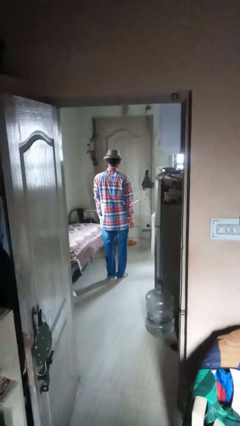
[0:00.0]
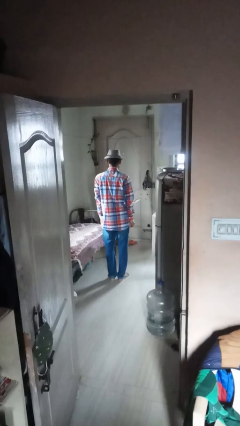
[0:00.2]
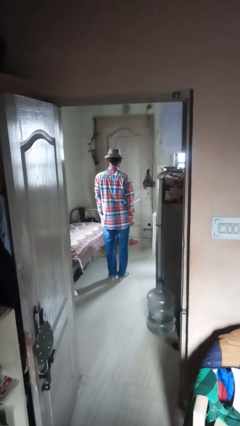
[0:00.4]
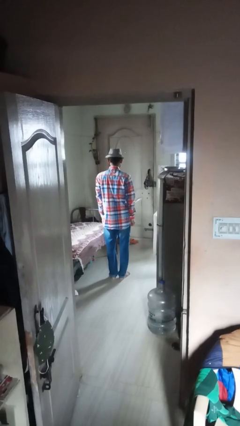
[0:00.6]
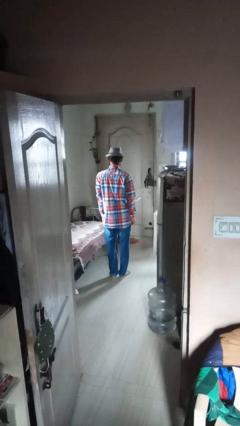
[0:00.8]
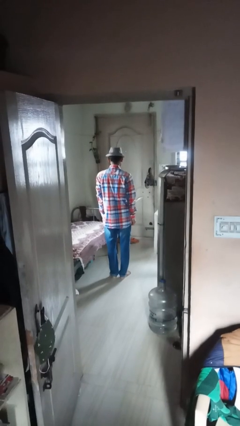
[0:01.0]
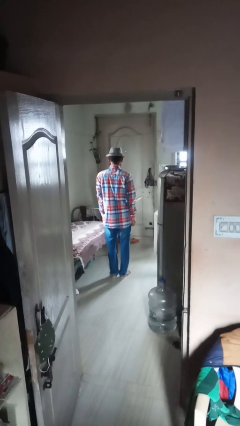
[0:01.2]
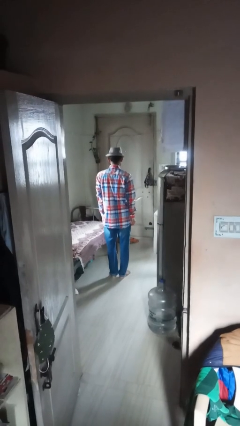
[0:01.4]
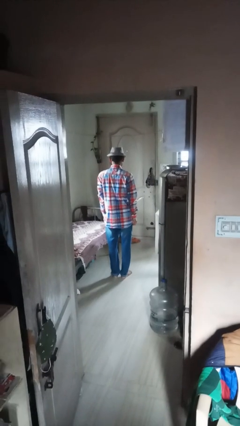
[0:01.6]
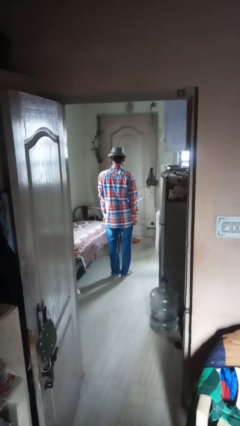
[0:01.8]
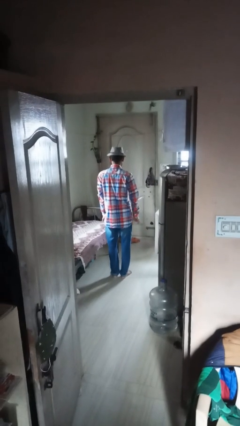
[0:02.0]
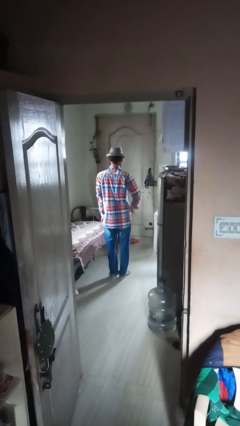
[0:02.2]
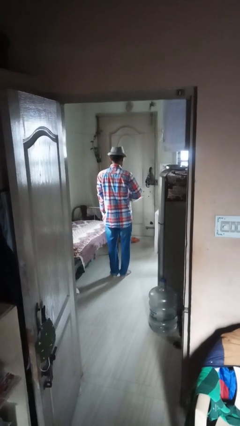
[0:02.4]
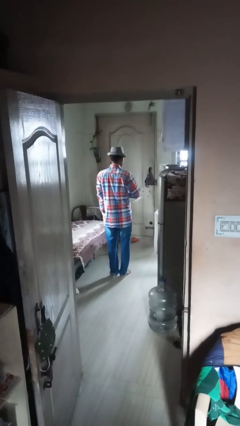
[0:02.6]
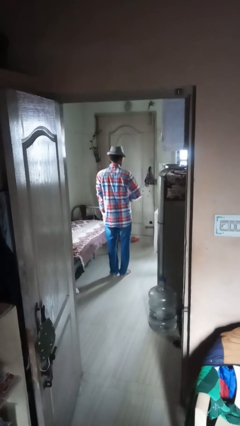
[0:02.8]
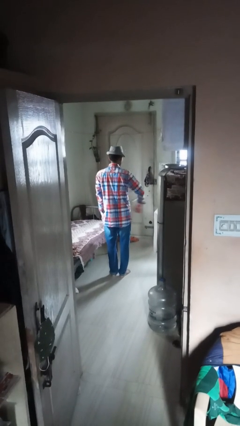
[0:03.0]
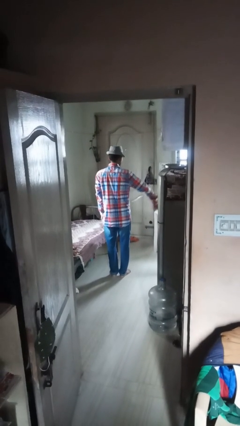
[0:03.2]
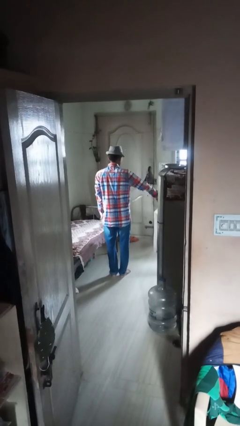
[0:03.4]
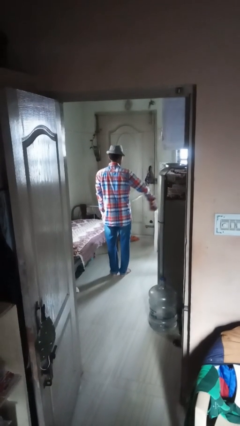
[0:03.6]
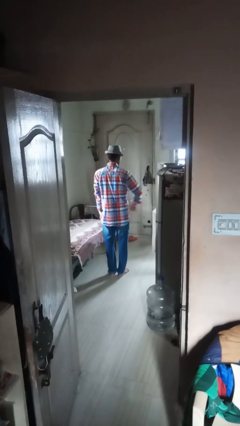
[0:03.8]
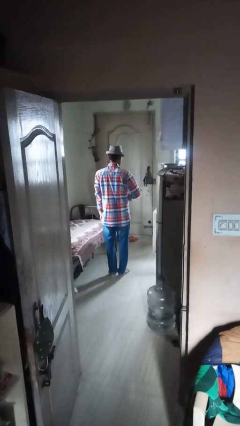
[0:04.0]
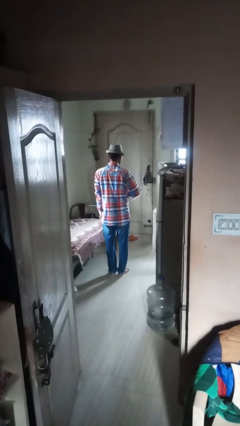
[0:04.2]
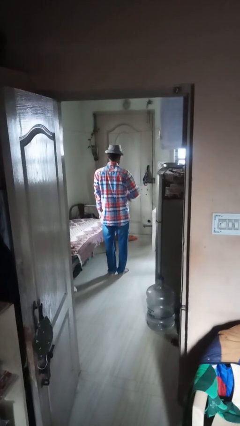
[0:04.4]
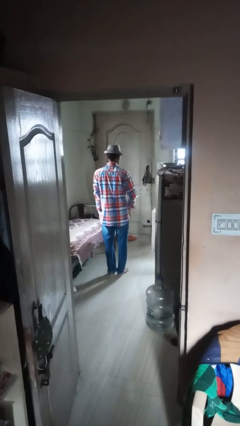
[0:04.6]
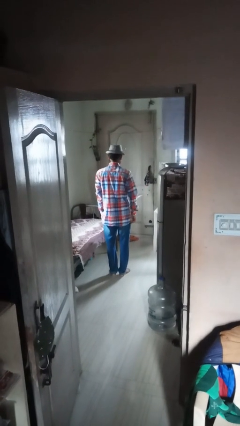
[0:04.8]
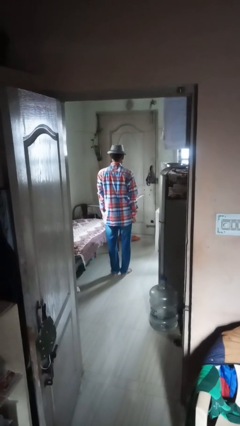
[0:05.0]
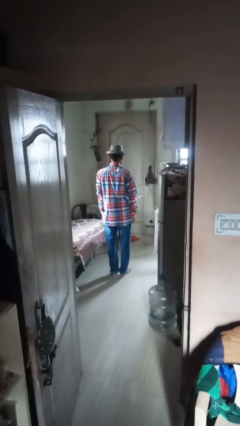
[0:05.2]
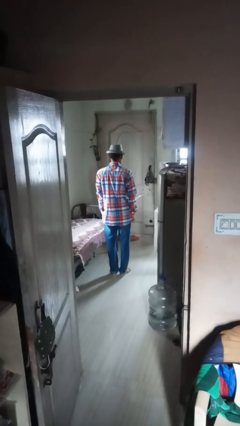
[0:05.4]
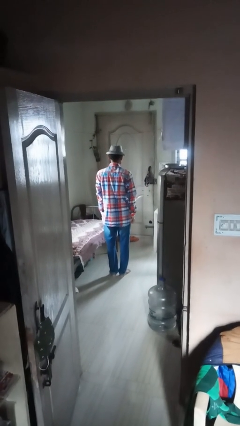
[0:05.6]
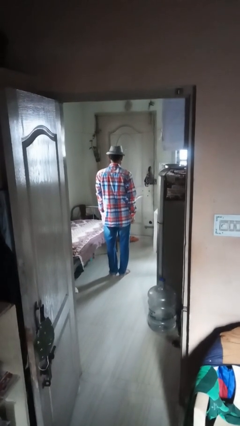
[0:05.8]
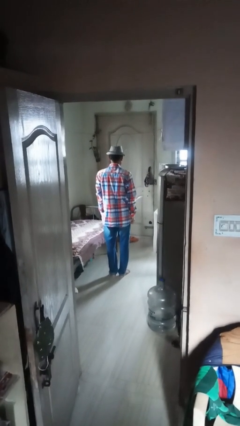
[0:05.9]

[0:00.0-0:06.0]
person gestures hang loose

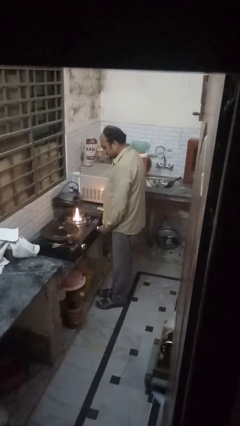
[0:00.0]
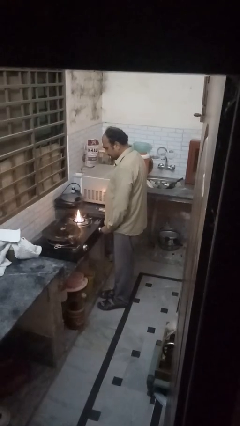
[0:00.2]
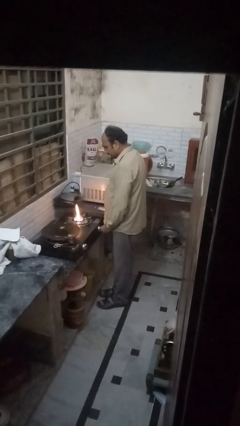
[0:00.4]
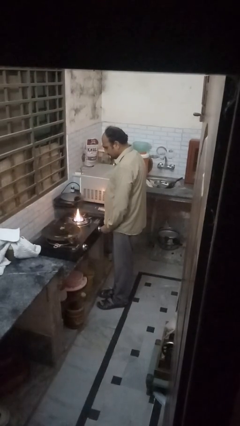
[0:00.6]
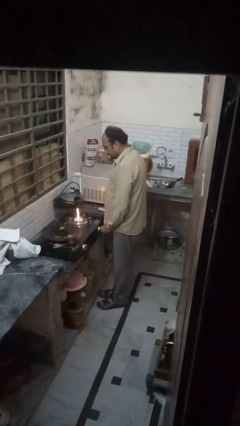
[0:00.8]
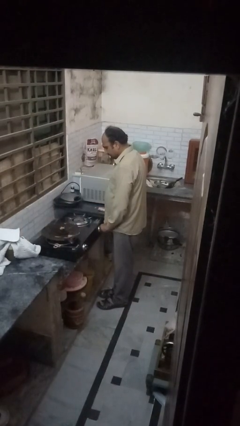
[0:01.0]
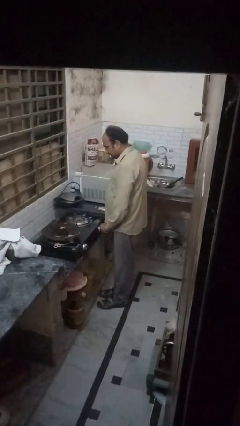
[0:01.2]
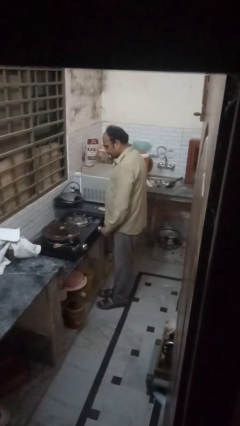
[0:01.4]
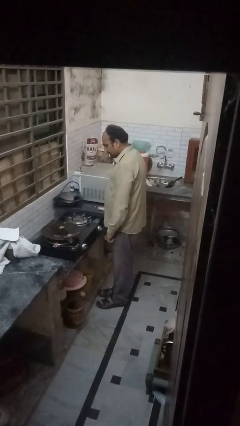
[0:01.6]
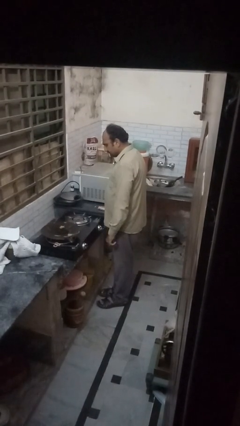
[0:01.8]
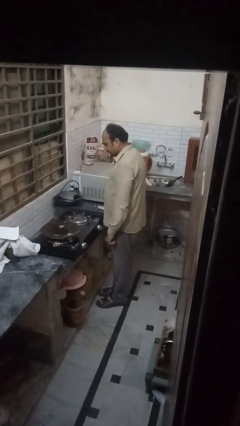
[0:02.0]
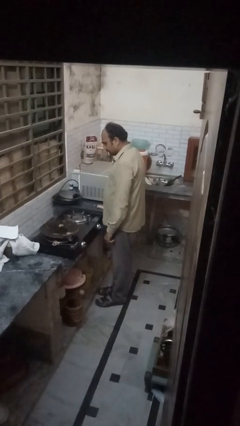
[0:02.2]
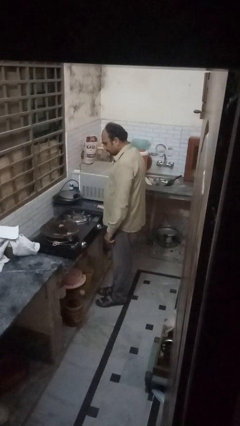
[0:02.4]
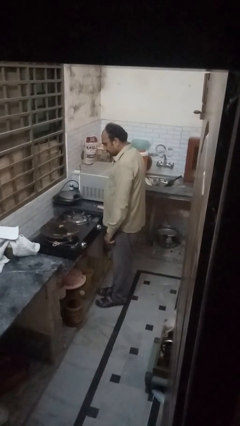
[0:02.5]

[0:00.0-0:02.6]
person turns off stovetop

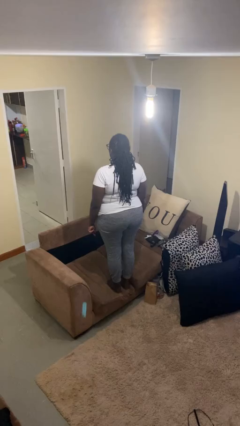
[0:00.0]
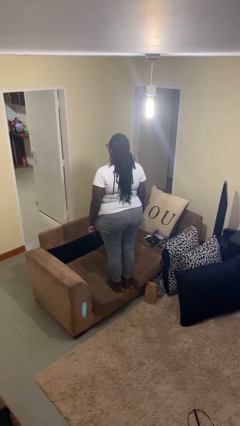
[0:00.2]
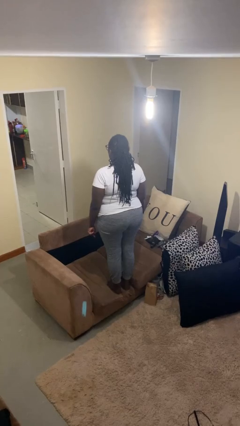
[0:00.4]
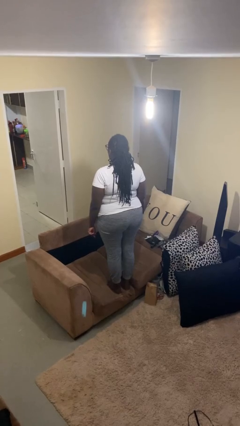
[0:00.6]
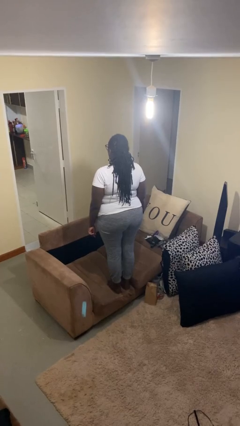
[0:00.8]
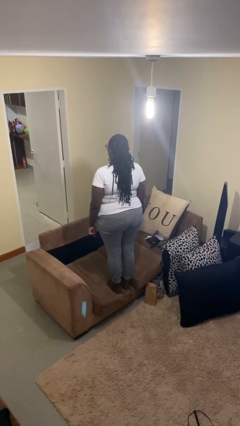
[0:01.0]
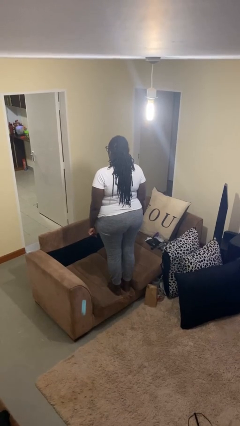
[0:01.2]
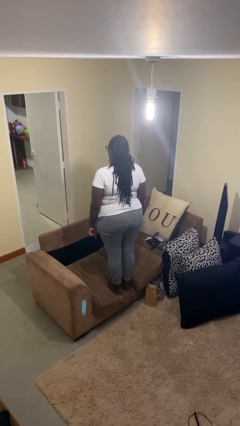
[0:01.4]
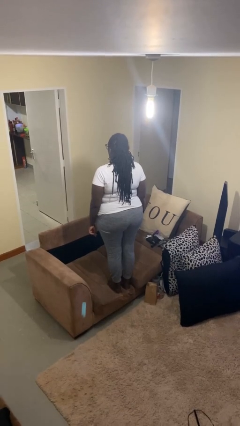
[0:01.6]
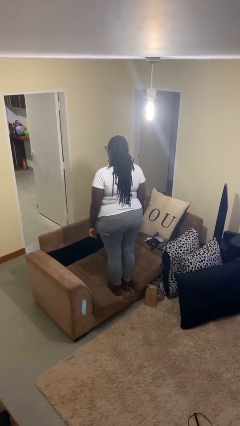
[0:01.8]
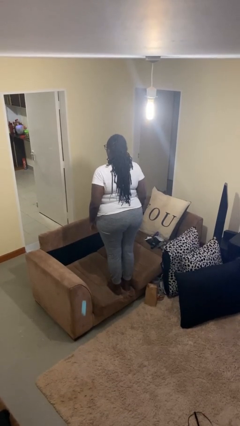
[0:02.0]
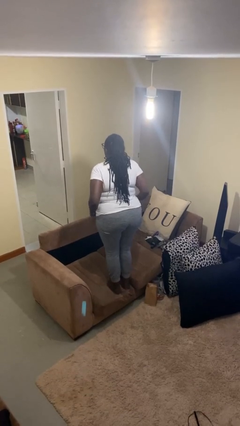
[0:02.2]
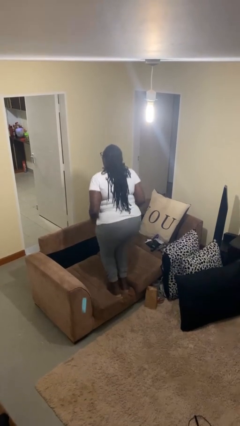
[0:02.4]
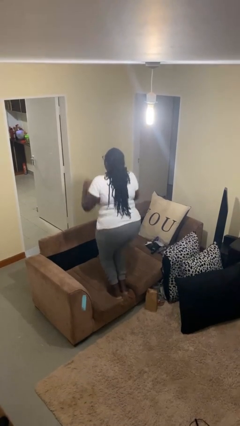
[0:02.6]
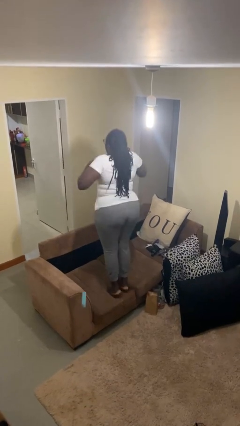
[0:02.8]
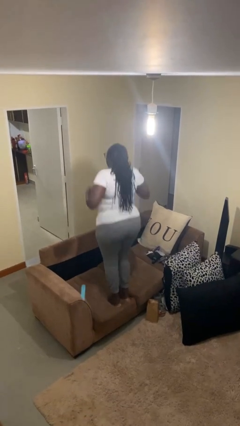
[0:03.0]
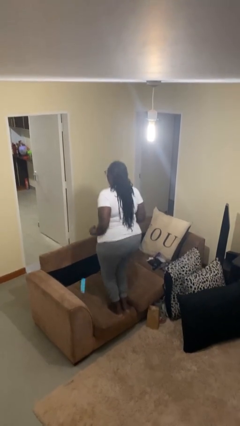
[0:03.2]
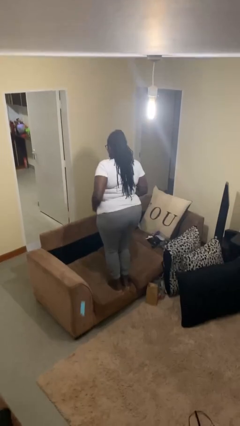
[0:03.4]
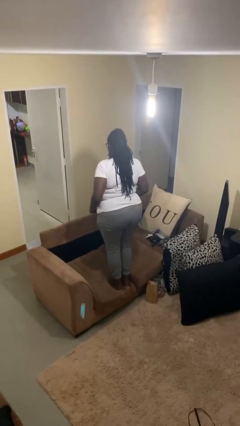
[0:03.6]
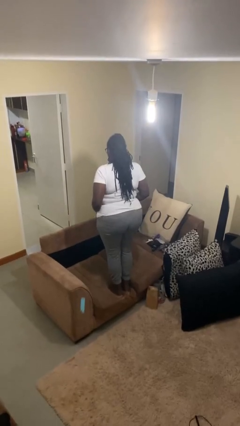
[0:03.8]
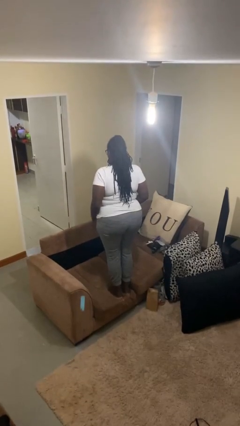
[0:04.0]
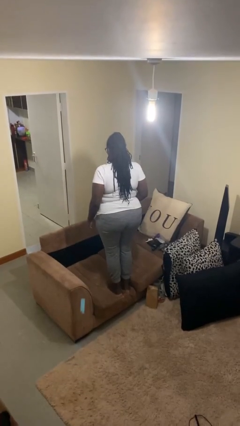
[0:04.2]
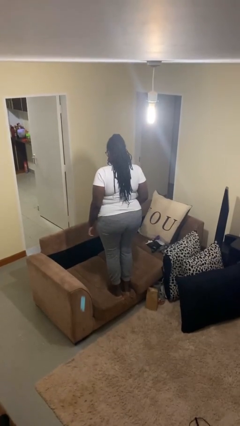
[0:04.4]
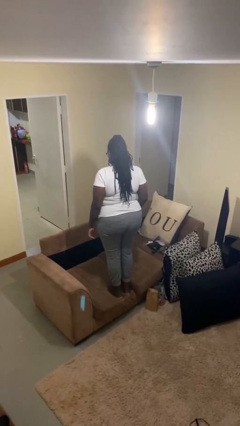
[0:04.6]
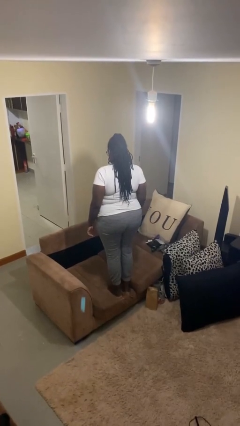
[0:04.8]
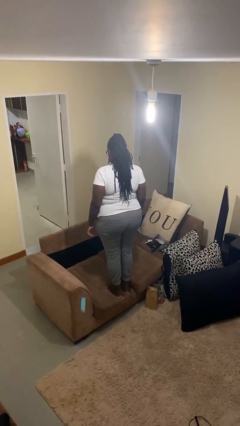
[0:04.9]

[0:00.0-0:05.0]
person jumps on couch

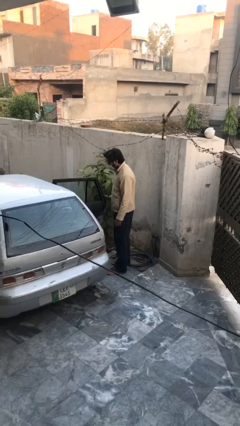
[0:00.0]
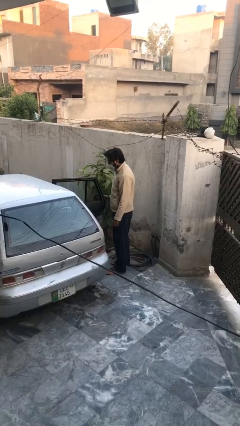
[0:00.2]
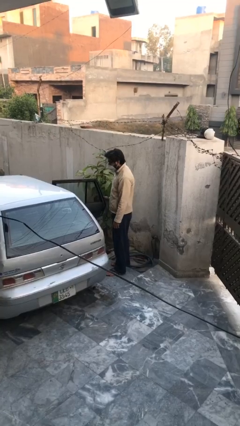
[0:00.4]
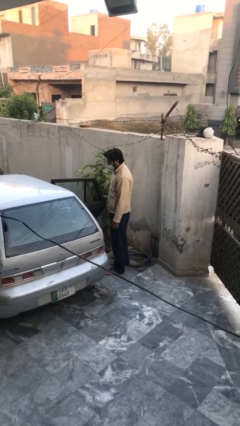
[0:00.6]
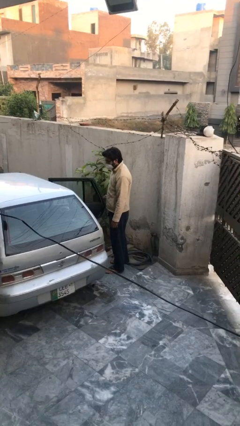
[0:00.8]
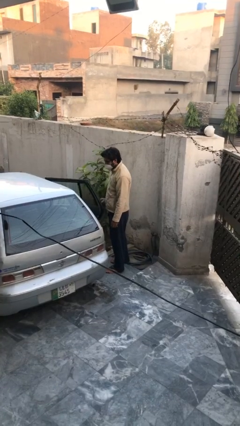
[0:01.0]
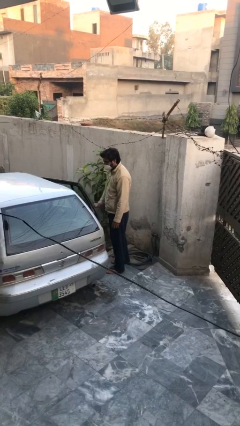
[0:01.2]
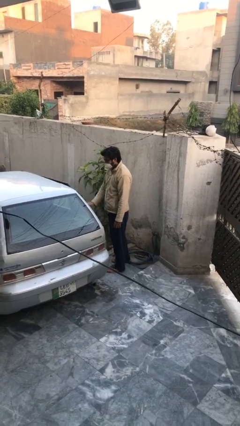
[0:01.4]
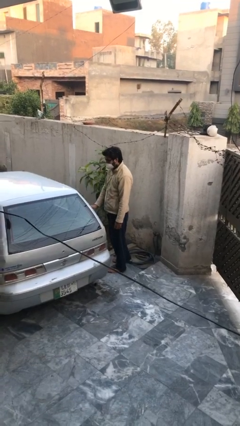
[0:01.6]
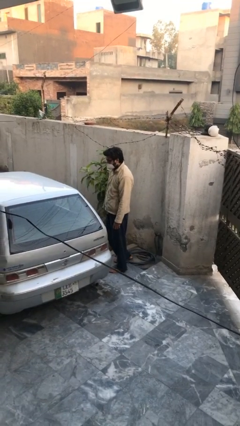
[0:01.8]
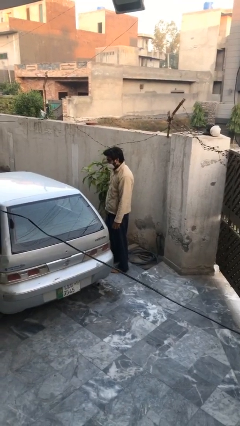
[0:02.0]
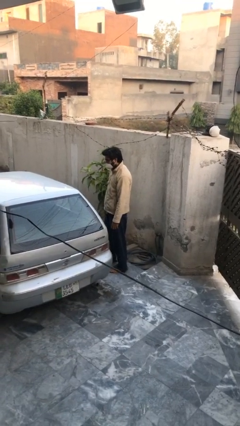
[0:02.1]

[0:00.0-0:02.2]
person closes car door

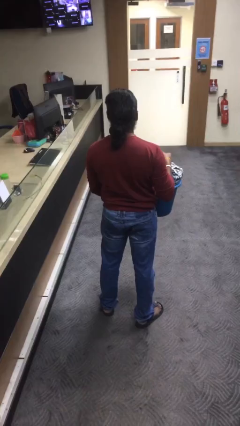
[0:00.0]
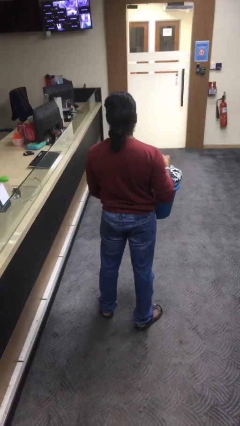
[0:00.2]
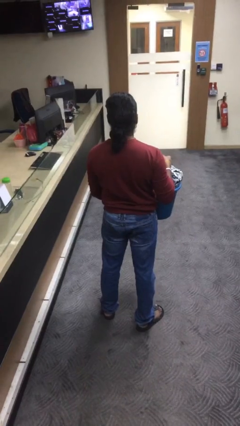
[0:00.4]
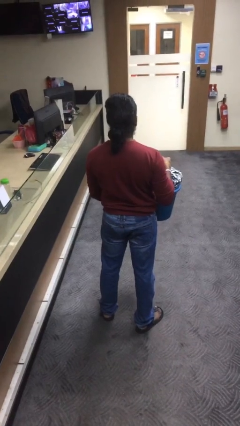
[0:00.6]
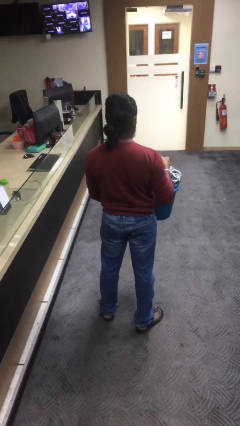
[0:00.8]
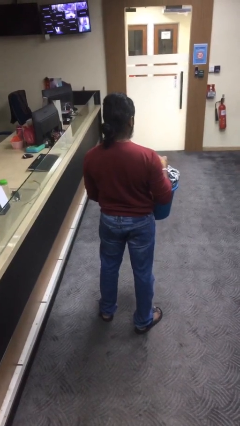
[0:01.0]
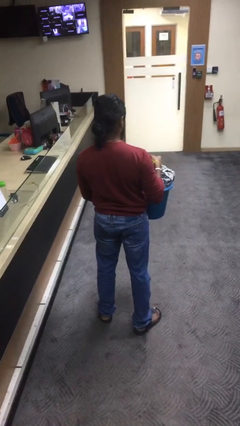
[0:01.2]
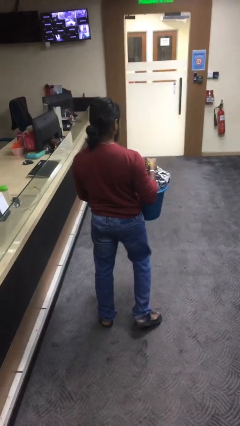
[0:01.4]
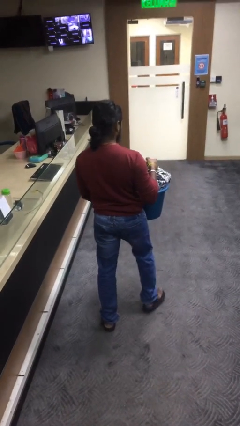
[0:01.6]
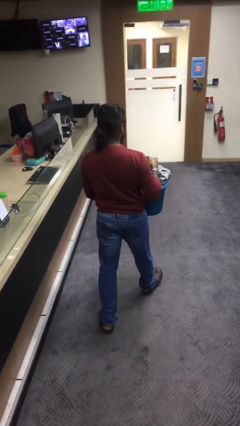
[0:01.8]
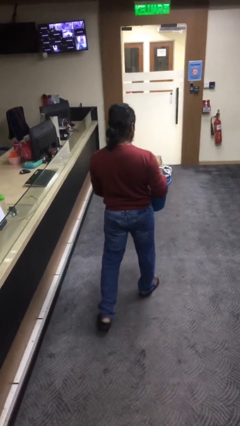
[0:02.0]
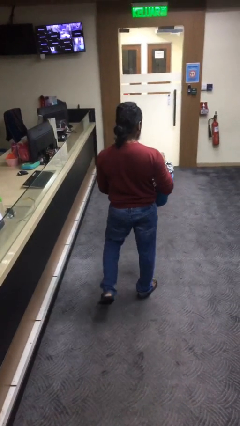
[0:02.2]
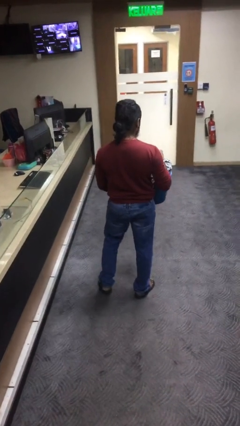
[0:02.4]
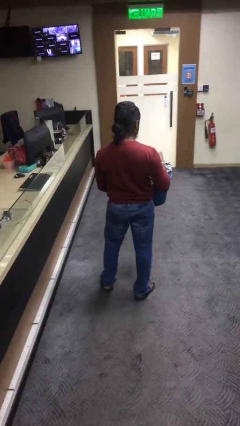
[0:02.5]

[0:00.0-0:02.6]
person carries laundry basket
